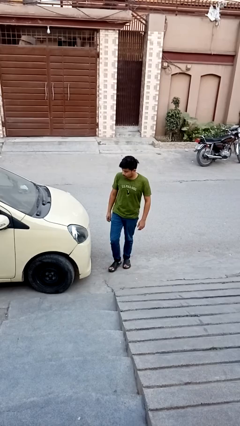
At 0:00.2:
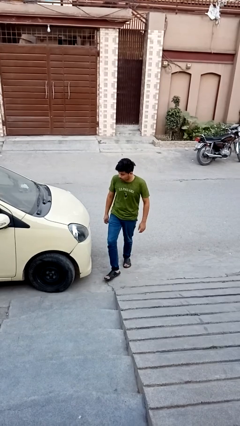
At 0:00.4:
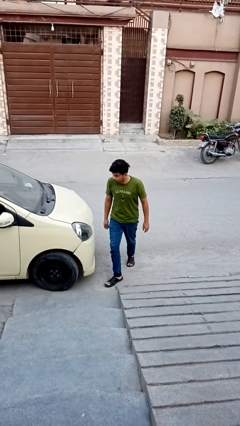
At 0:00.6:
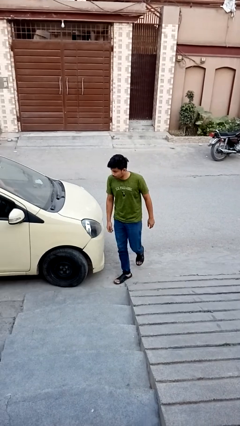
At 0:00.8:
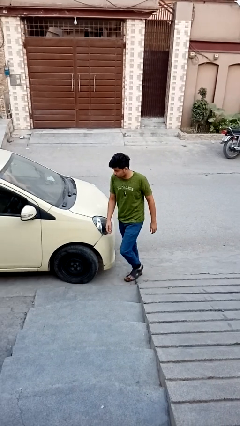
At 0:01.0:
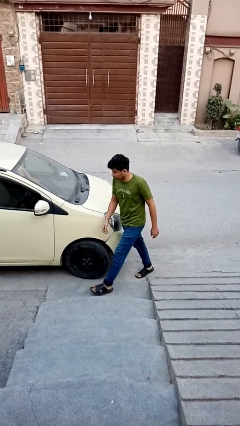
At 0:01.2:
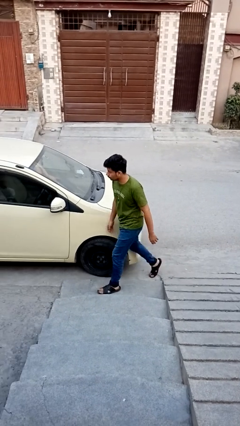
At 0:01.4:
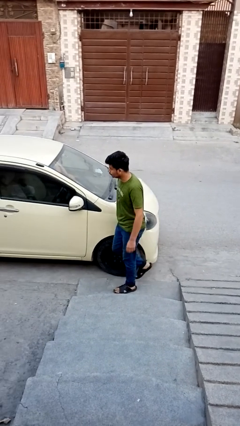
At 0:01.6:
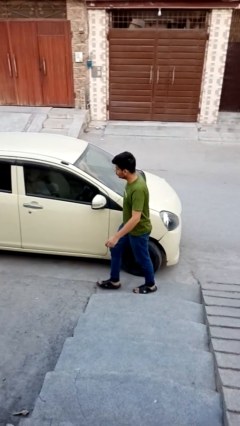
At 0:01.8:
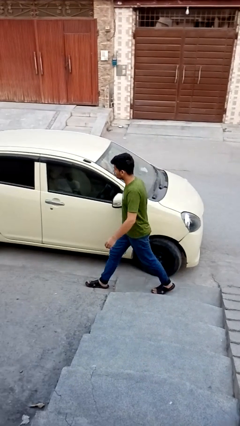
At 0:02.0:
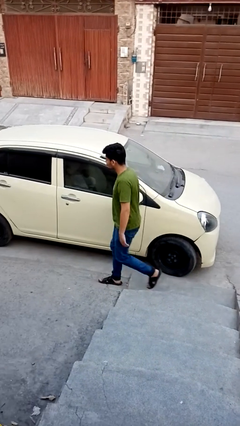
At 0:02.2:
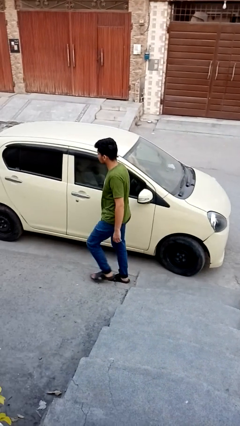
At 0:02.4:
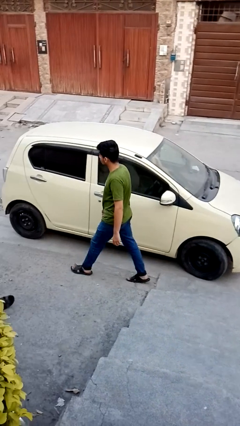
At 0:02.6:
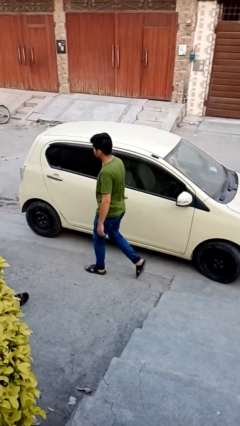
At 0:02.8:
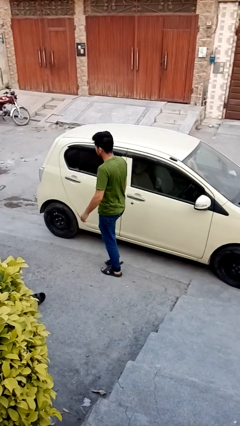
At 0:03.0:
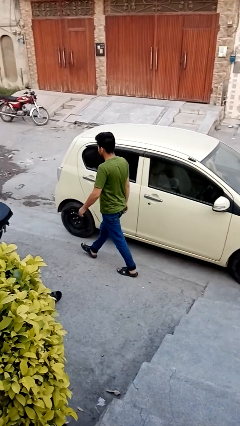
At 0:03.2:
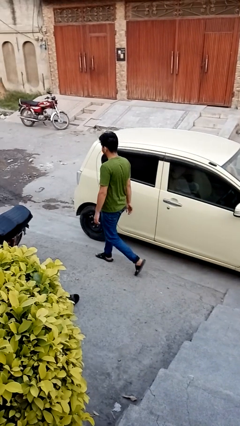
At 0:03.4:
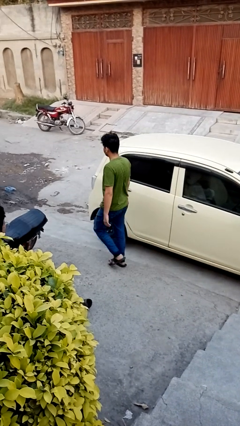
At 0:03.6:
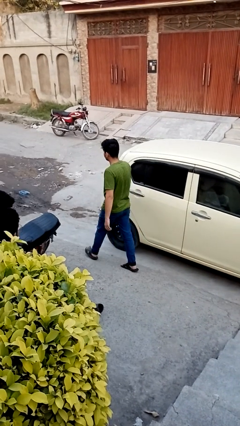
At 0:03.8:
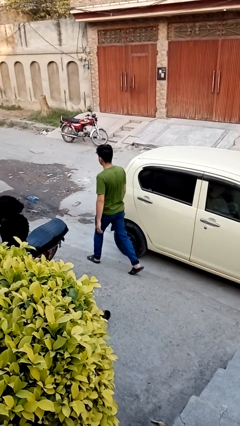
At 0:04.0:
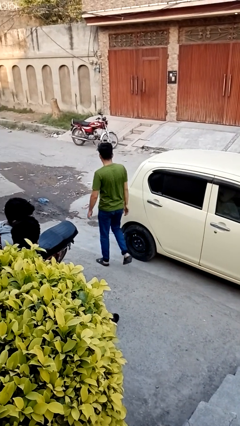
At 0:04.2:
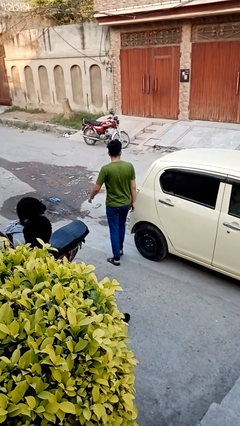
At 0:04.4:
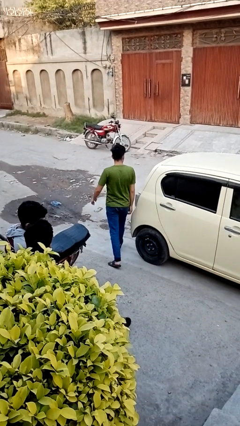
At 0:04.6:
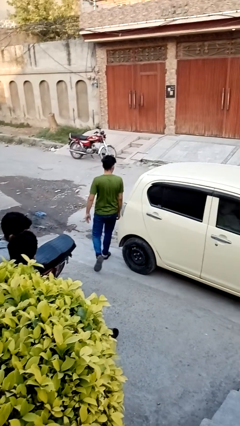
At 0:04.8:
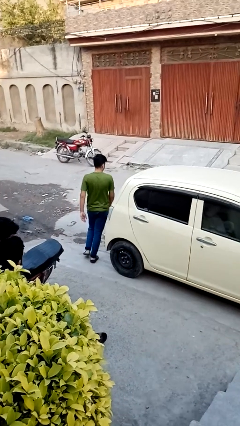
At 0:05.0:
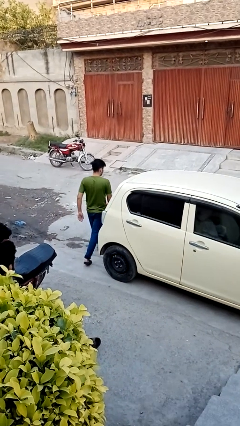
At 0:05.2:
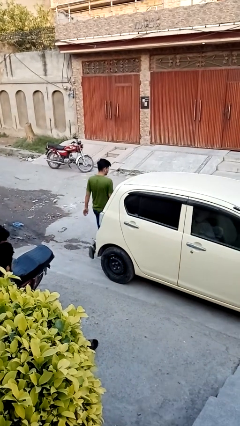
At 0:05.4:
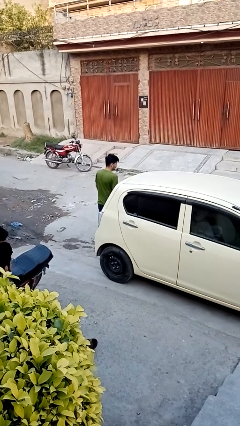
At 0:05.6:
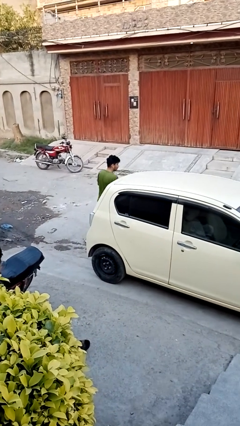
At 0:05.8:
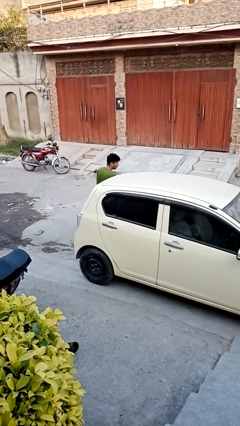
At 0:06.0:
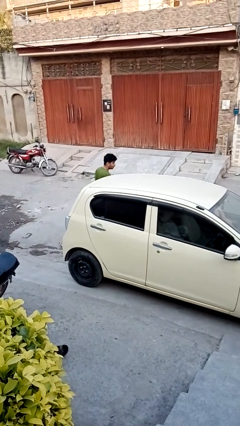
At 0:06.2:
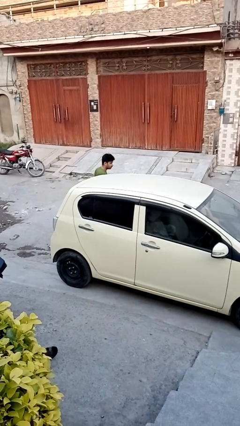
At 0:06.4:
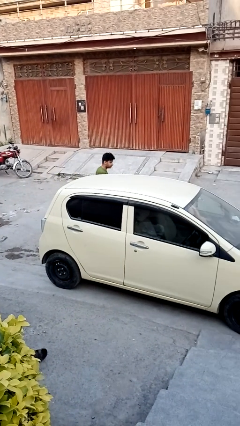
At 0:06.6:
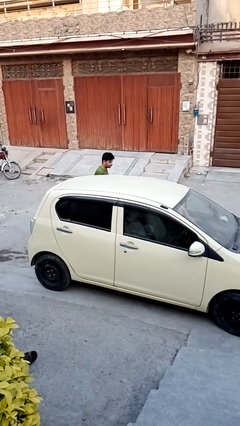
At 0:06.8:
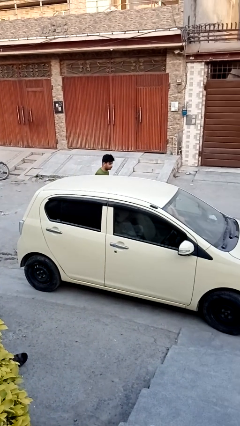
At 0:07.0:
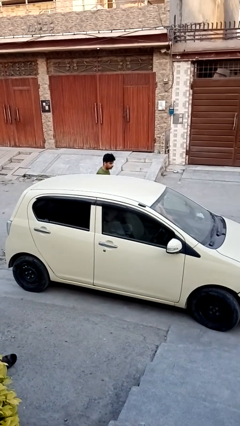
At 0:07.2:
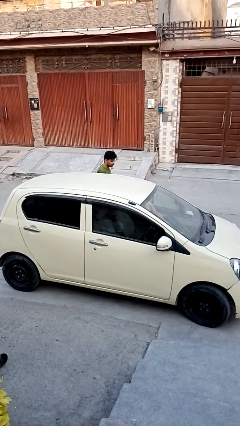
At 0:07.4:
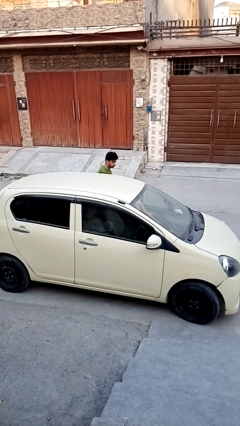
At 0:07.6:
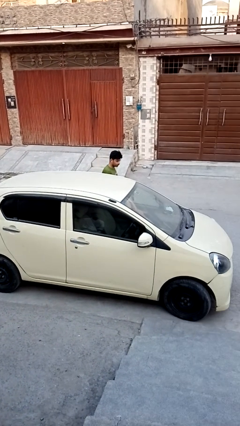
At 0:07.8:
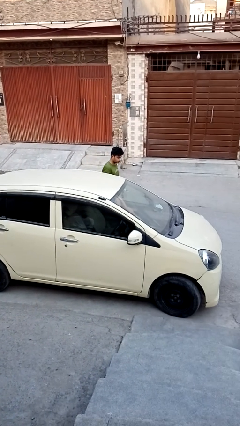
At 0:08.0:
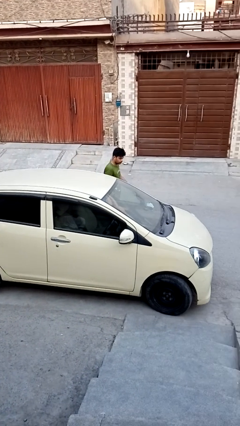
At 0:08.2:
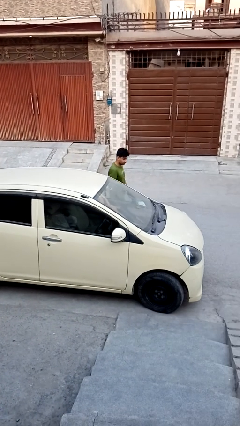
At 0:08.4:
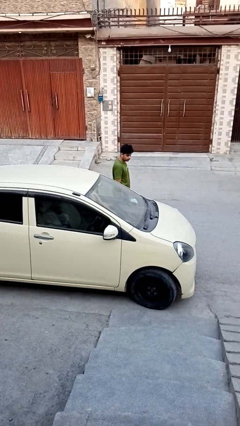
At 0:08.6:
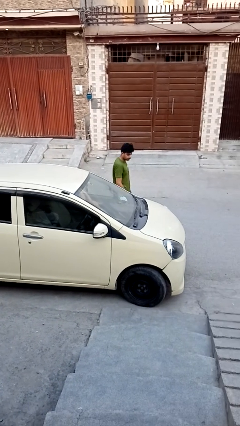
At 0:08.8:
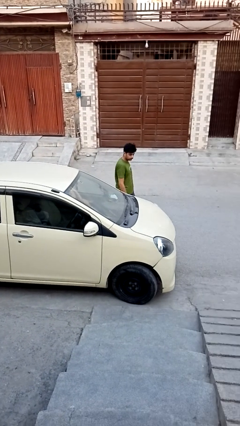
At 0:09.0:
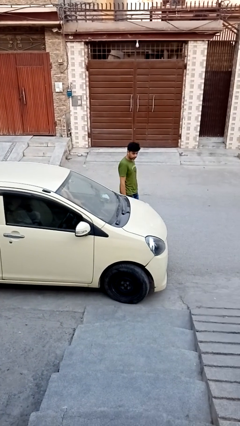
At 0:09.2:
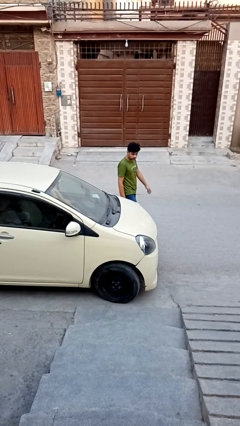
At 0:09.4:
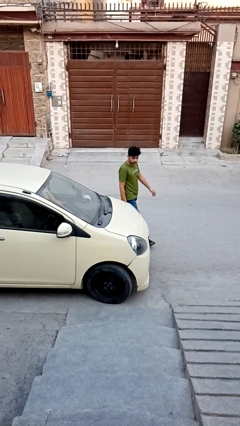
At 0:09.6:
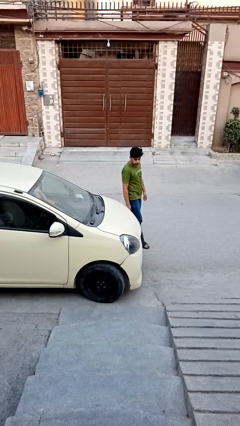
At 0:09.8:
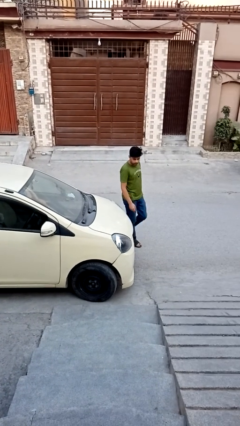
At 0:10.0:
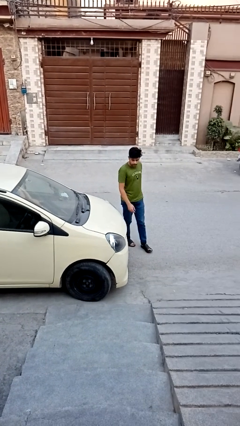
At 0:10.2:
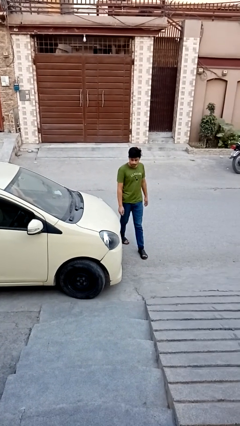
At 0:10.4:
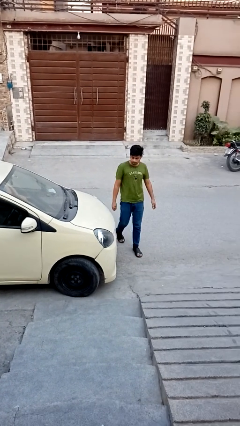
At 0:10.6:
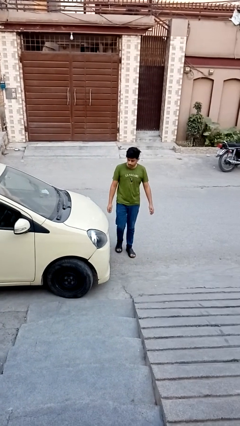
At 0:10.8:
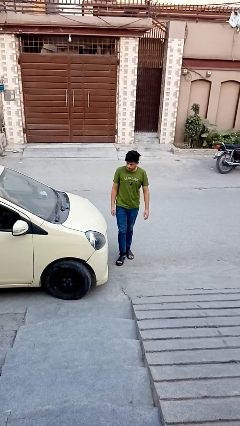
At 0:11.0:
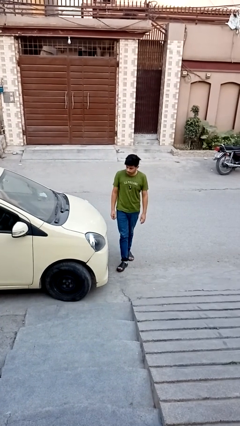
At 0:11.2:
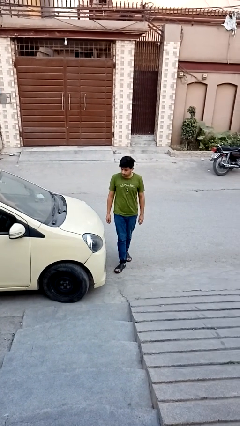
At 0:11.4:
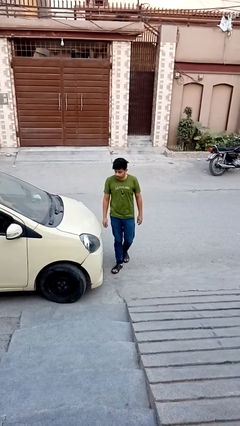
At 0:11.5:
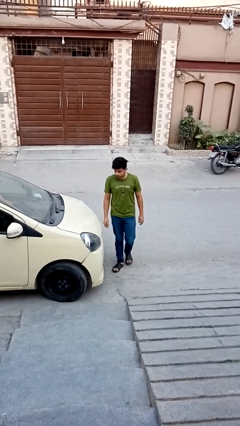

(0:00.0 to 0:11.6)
person walks around car

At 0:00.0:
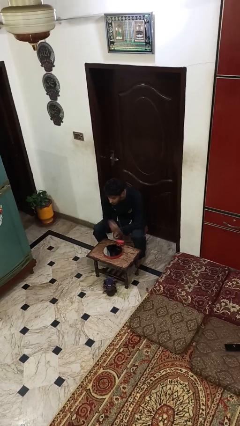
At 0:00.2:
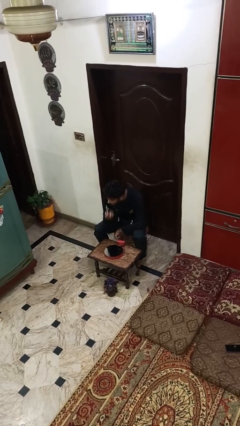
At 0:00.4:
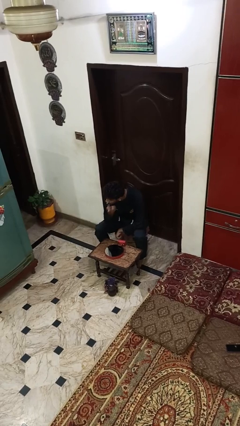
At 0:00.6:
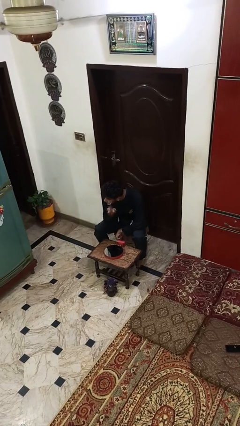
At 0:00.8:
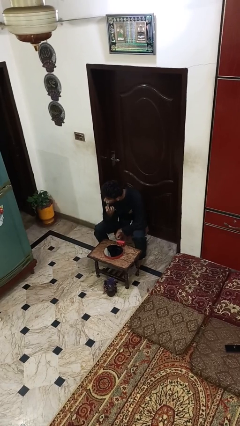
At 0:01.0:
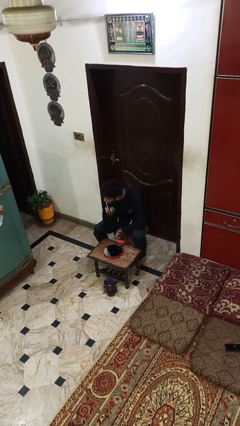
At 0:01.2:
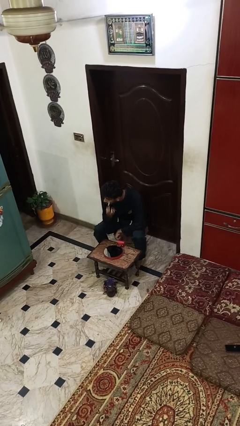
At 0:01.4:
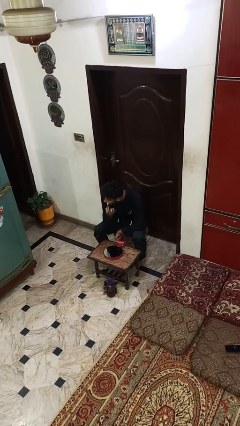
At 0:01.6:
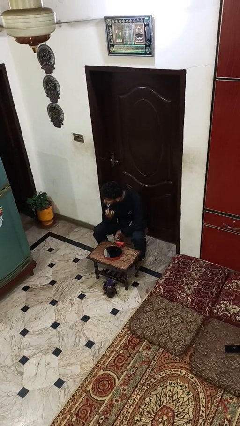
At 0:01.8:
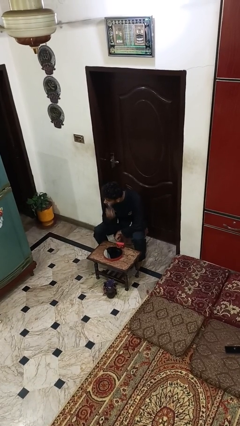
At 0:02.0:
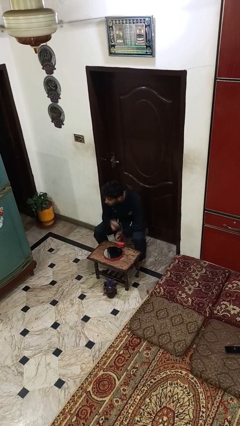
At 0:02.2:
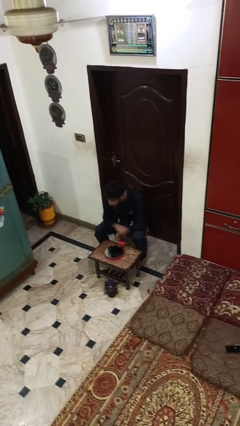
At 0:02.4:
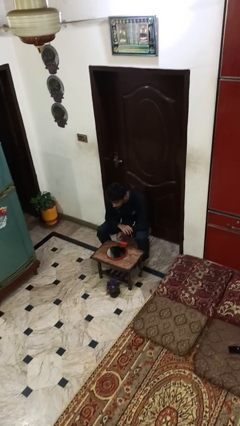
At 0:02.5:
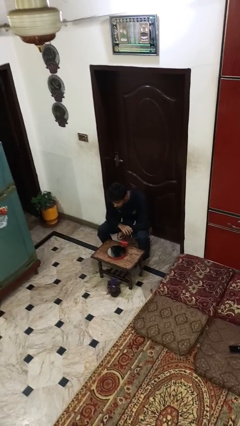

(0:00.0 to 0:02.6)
person applies eye makeup

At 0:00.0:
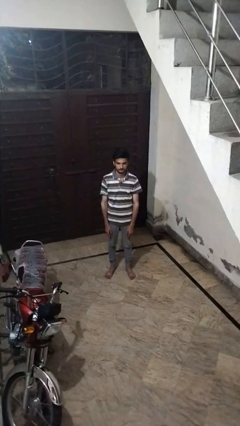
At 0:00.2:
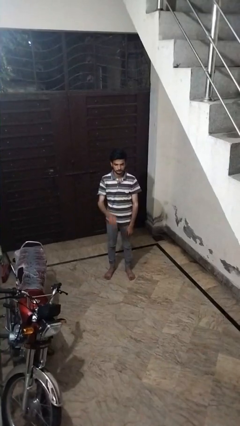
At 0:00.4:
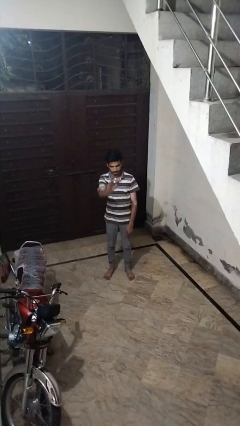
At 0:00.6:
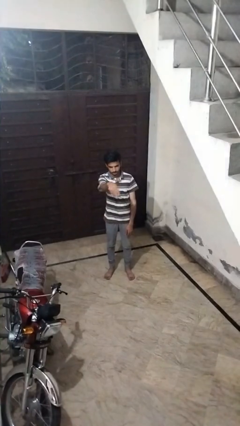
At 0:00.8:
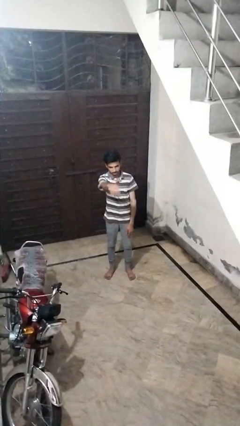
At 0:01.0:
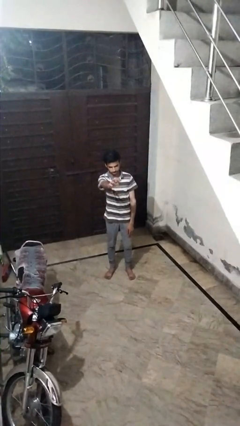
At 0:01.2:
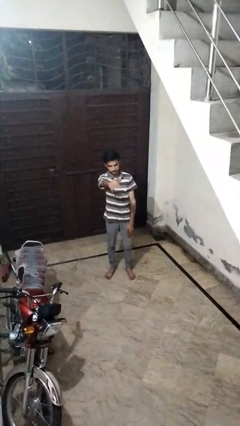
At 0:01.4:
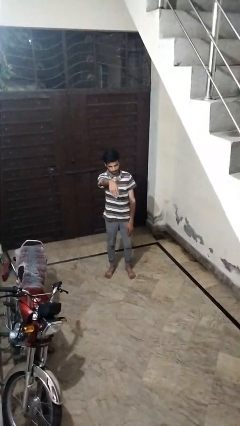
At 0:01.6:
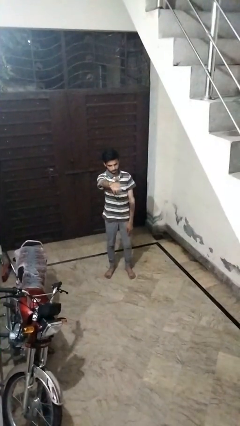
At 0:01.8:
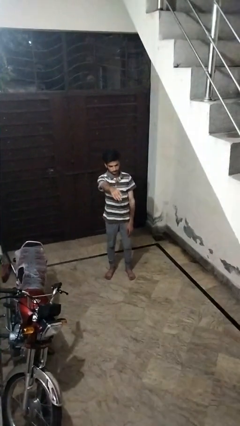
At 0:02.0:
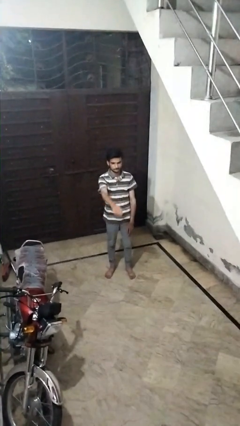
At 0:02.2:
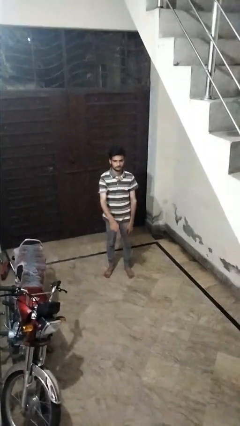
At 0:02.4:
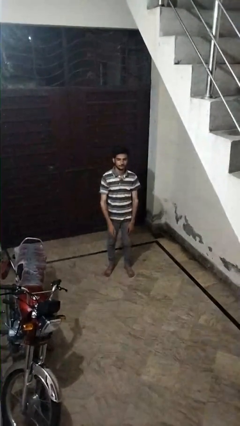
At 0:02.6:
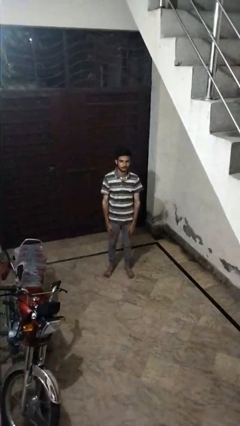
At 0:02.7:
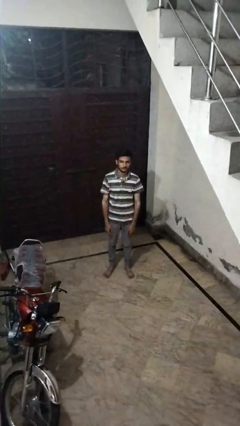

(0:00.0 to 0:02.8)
person gestures come here

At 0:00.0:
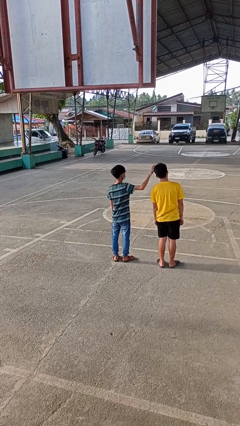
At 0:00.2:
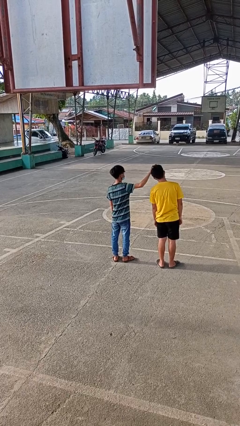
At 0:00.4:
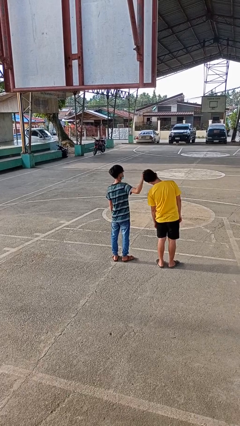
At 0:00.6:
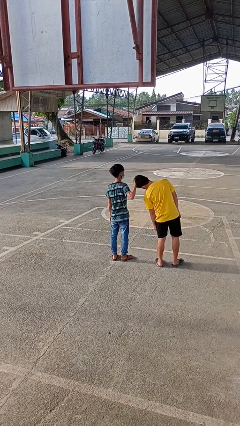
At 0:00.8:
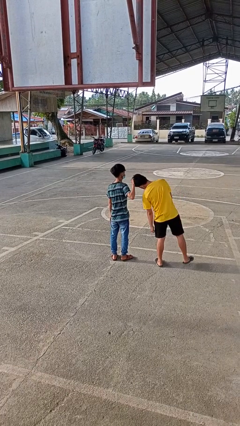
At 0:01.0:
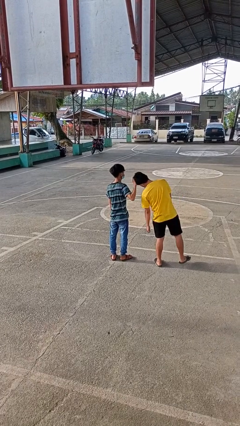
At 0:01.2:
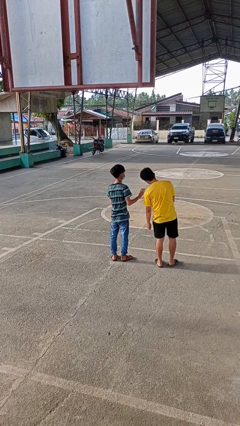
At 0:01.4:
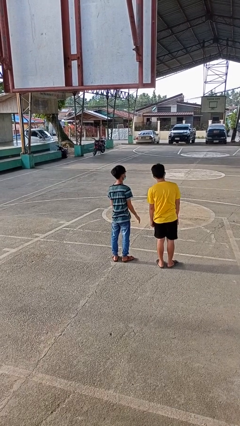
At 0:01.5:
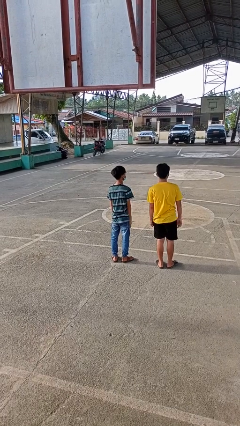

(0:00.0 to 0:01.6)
person grabs person by hair
